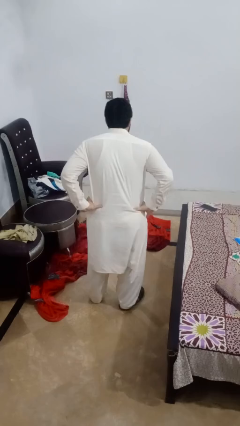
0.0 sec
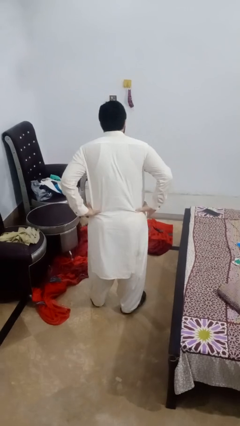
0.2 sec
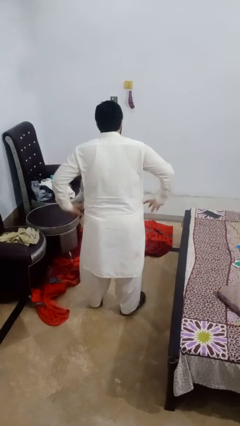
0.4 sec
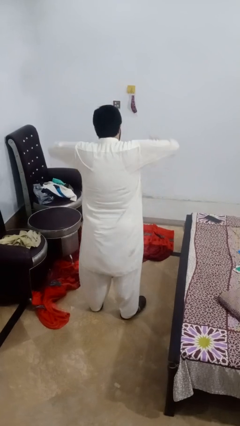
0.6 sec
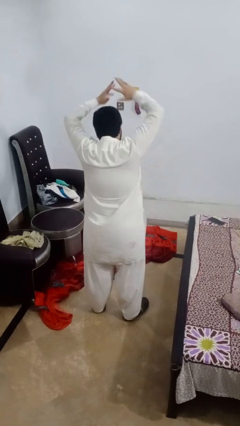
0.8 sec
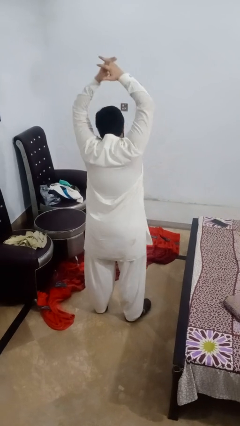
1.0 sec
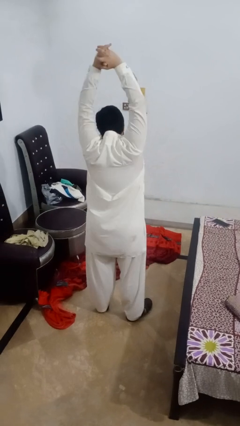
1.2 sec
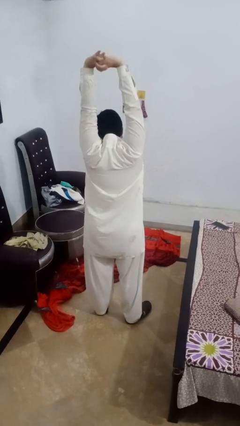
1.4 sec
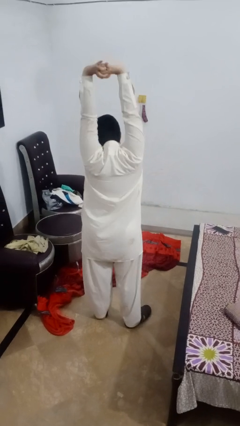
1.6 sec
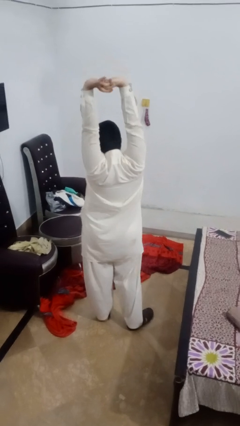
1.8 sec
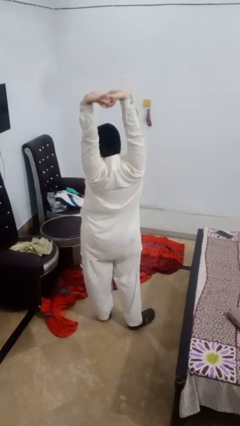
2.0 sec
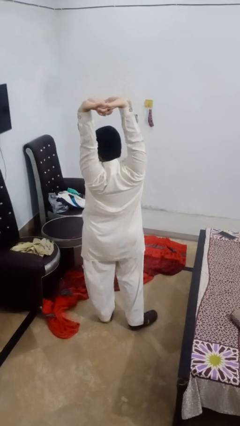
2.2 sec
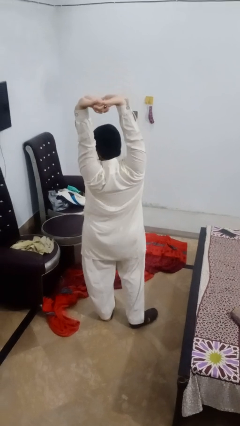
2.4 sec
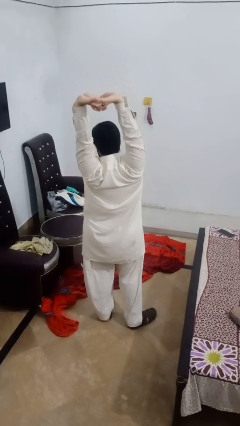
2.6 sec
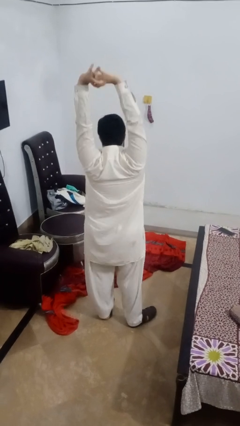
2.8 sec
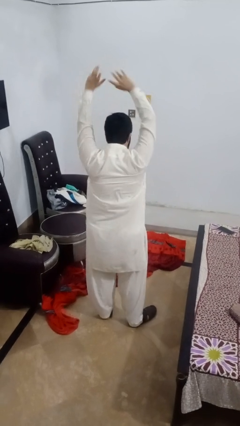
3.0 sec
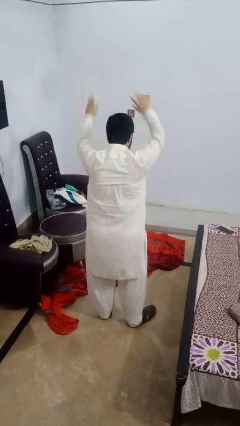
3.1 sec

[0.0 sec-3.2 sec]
person stretches arms over head

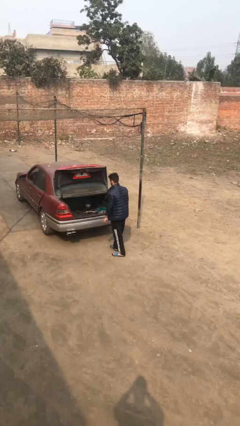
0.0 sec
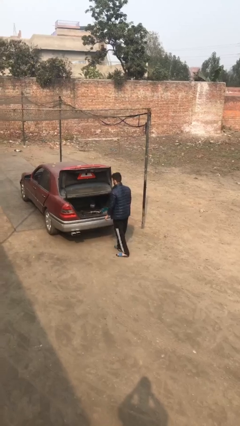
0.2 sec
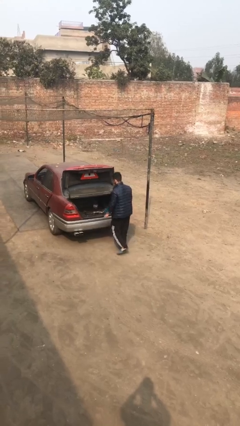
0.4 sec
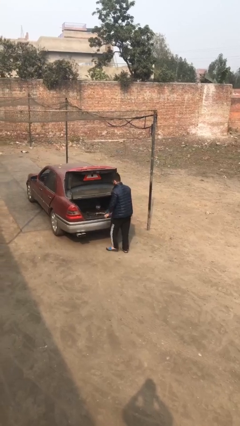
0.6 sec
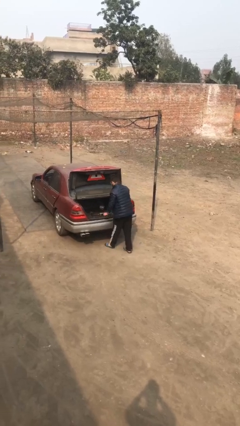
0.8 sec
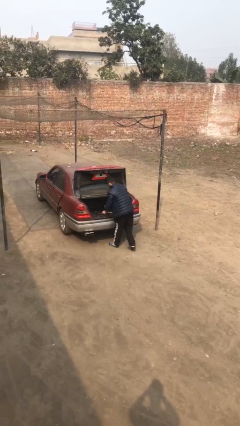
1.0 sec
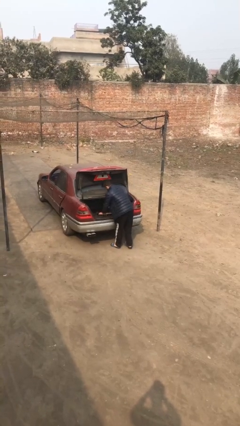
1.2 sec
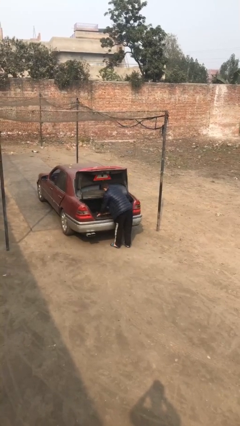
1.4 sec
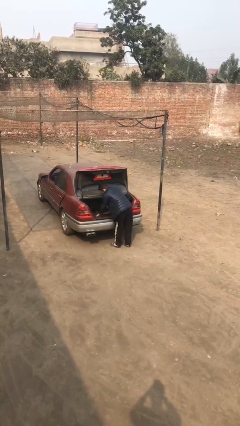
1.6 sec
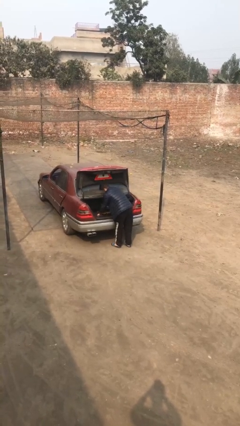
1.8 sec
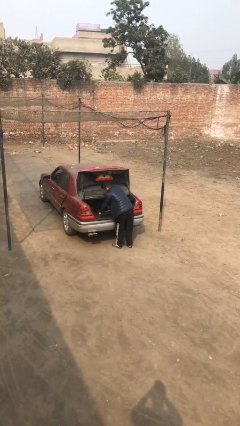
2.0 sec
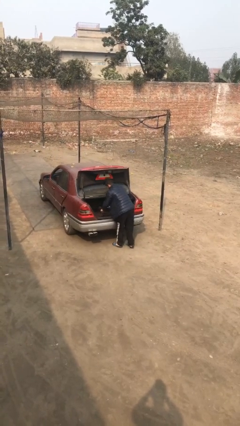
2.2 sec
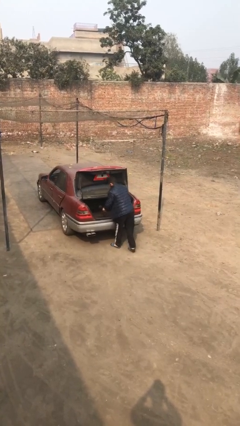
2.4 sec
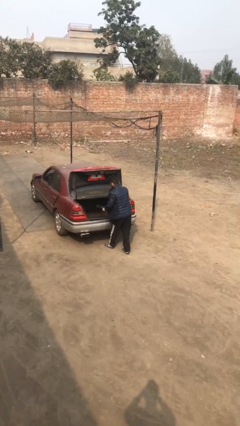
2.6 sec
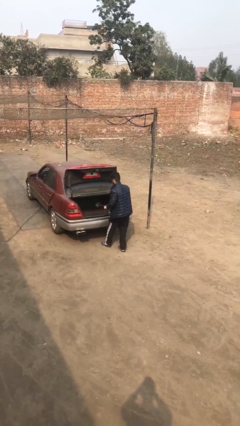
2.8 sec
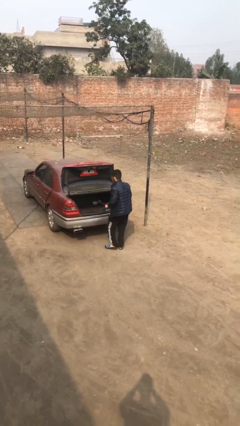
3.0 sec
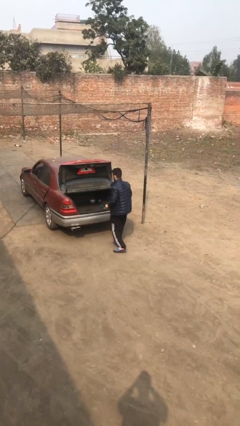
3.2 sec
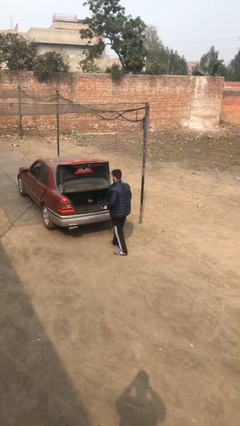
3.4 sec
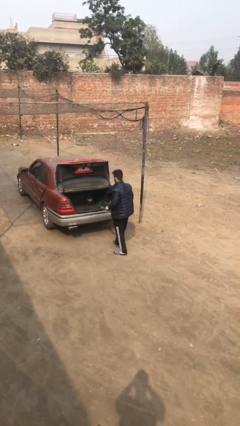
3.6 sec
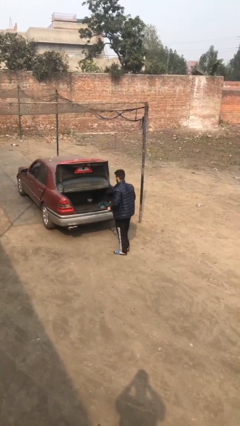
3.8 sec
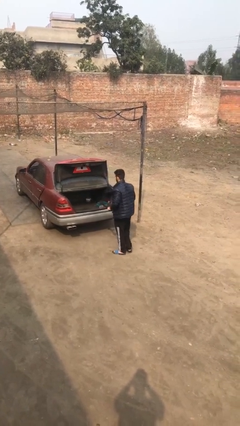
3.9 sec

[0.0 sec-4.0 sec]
person unloads car

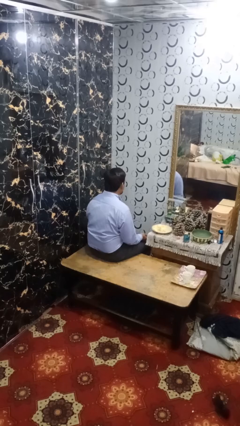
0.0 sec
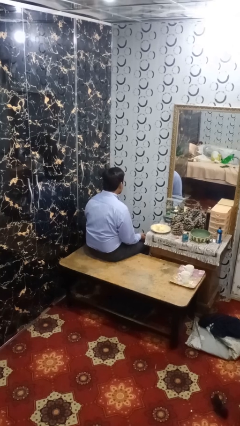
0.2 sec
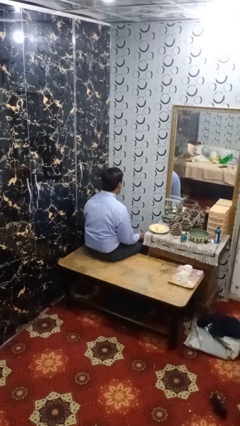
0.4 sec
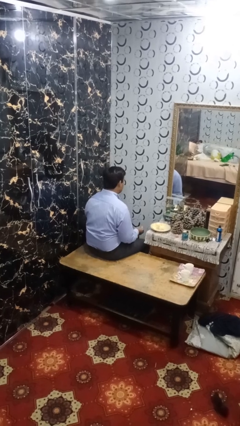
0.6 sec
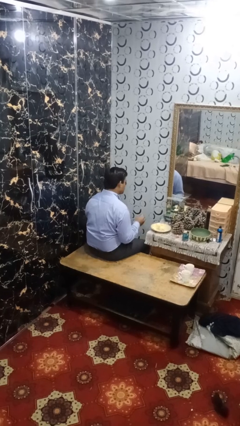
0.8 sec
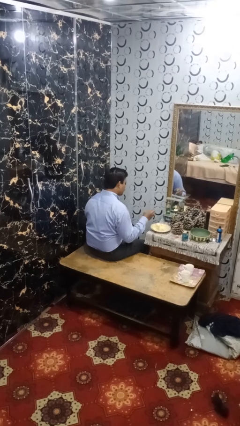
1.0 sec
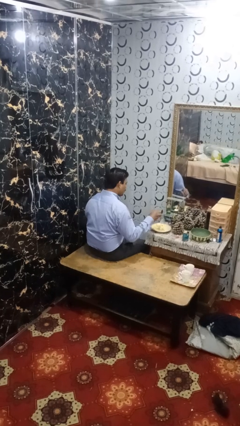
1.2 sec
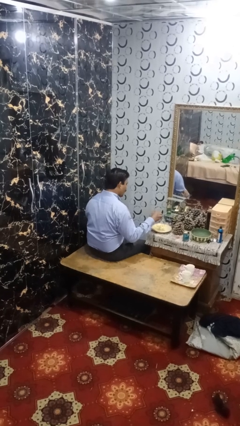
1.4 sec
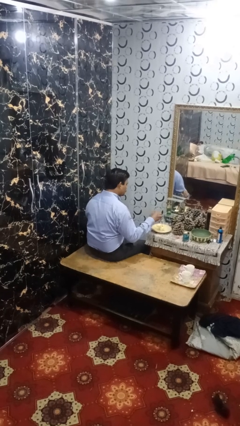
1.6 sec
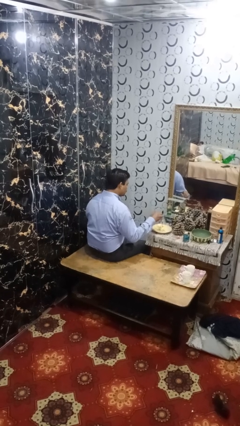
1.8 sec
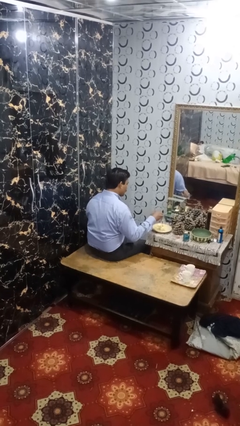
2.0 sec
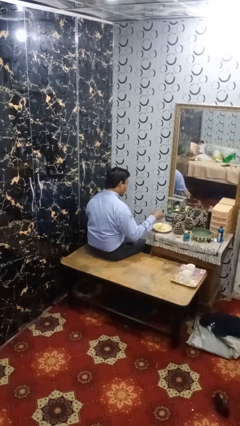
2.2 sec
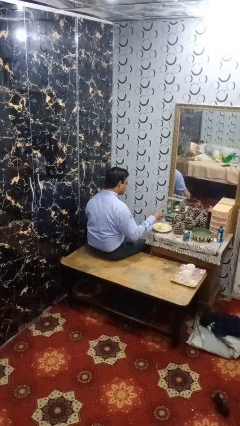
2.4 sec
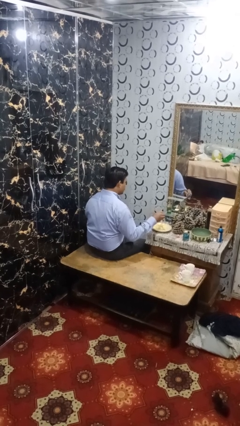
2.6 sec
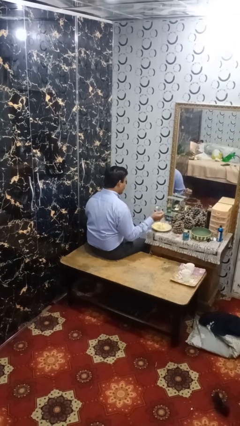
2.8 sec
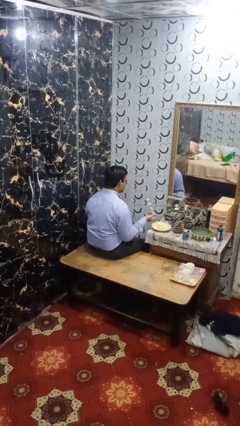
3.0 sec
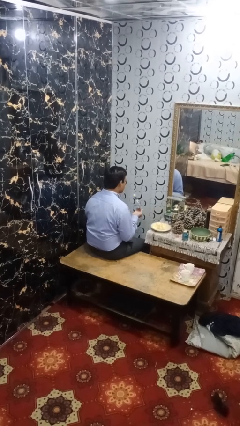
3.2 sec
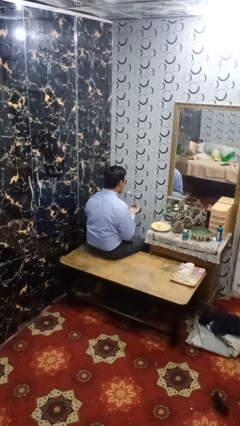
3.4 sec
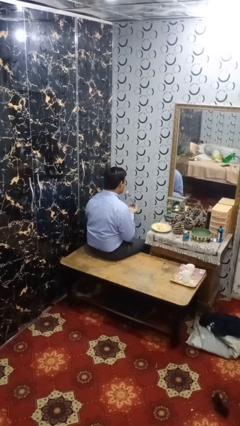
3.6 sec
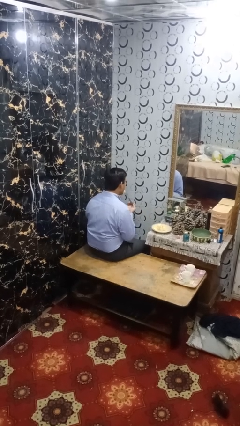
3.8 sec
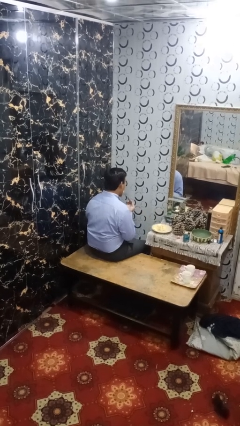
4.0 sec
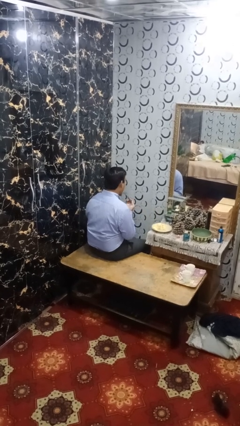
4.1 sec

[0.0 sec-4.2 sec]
person eats with utensil

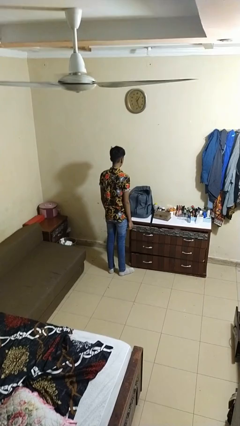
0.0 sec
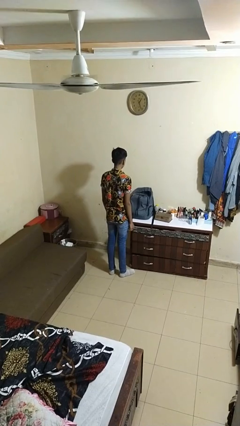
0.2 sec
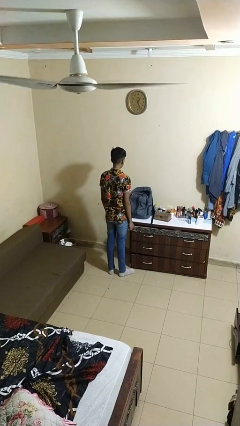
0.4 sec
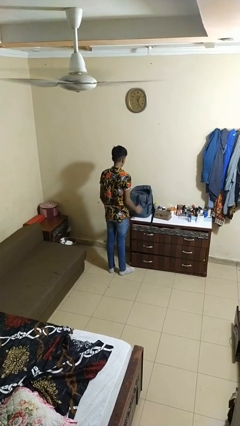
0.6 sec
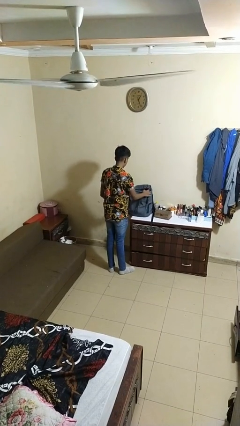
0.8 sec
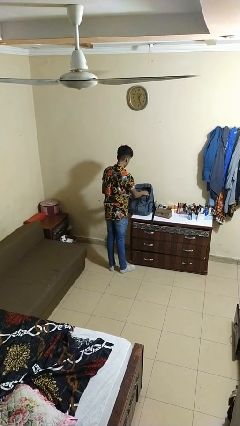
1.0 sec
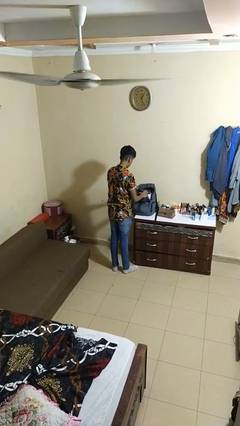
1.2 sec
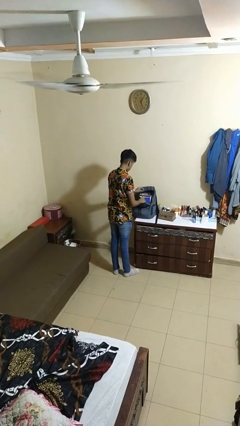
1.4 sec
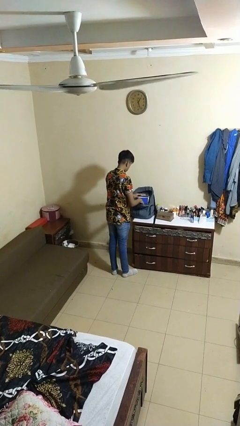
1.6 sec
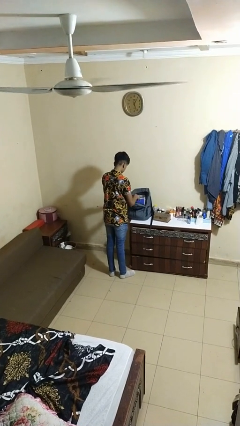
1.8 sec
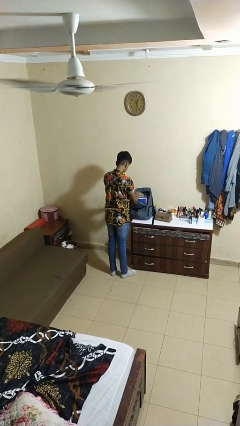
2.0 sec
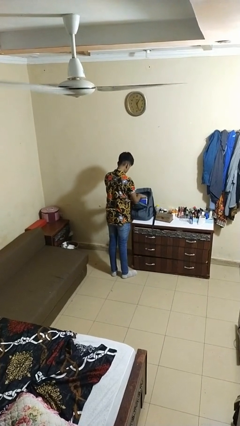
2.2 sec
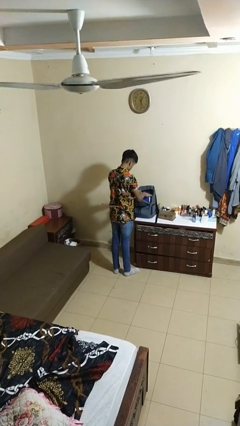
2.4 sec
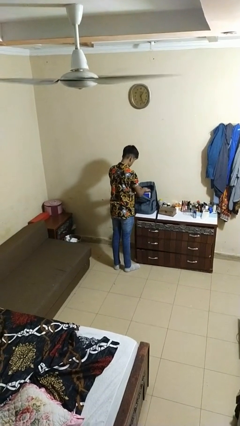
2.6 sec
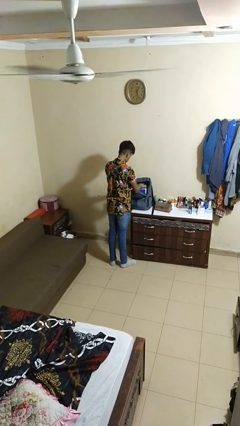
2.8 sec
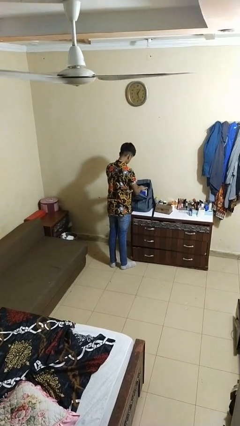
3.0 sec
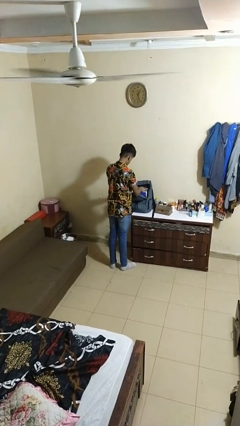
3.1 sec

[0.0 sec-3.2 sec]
person searches in backpack

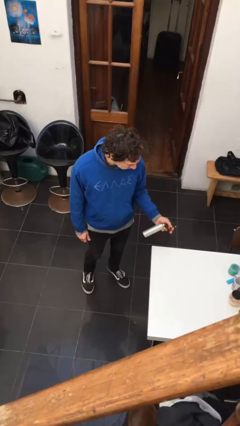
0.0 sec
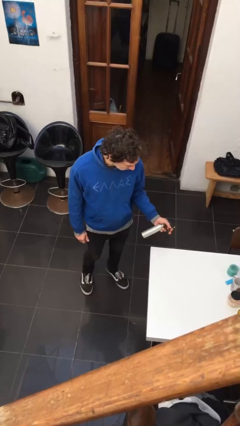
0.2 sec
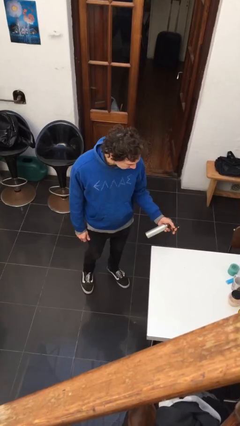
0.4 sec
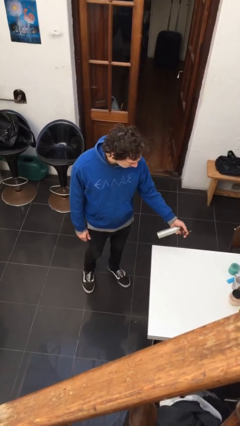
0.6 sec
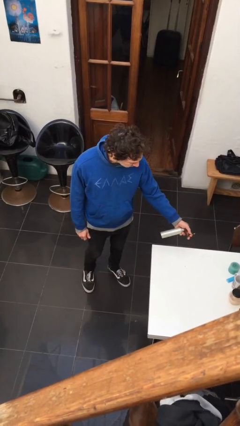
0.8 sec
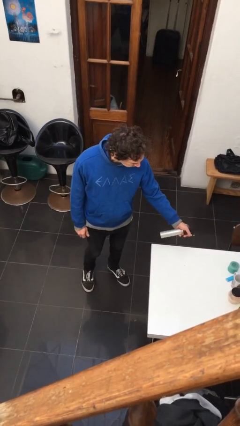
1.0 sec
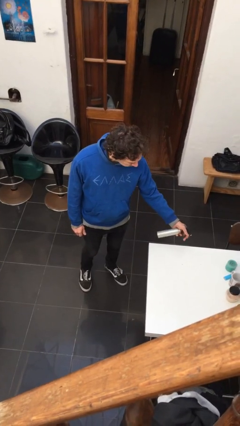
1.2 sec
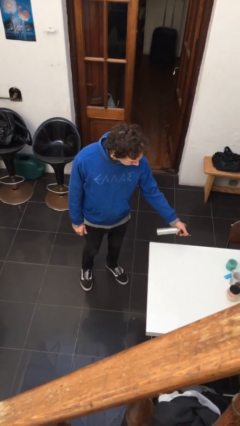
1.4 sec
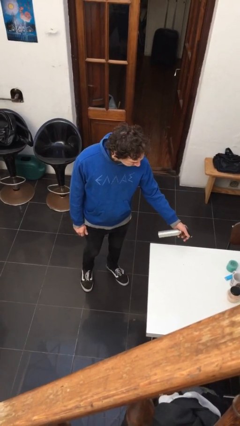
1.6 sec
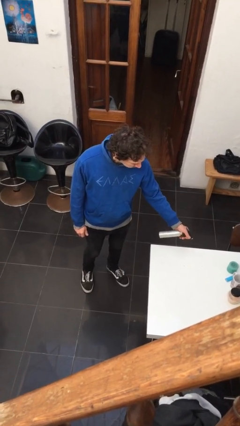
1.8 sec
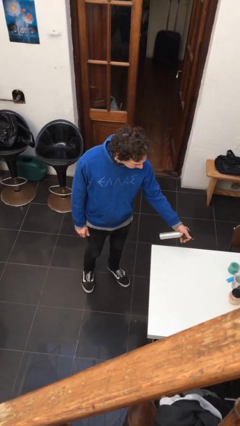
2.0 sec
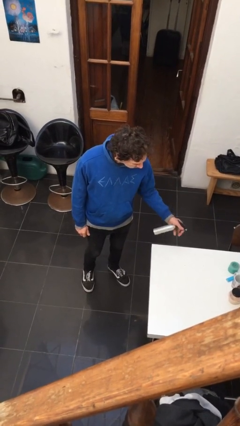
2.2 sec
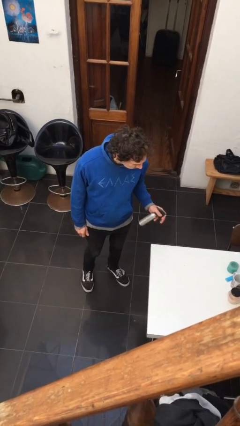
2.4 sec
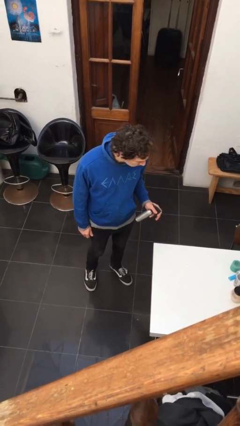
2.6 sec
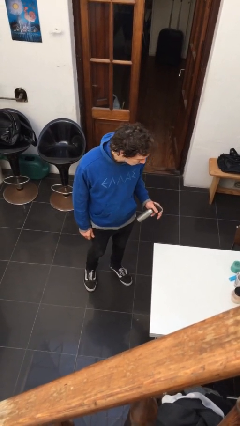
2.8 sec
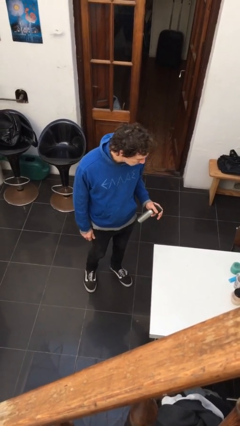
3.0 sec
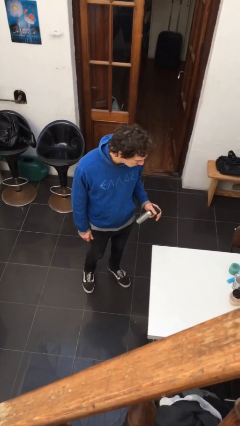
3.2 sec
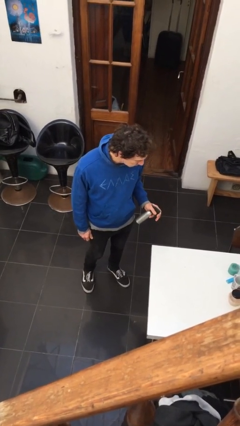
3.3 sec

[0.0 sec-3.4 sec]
person sprays from bottle
